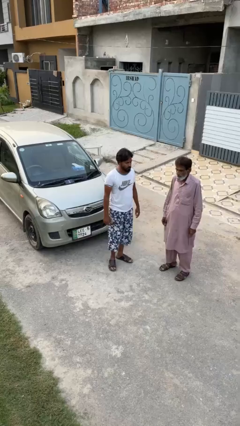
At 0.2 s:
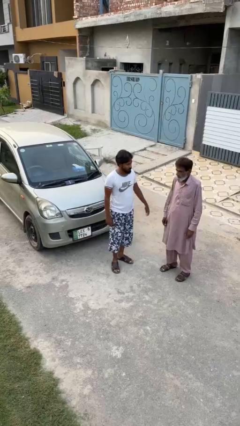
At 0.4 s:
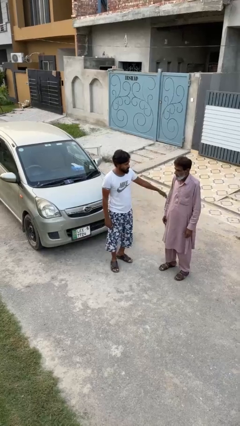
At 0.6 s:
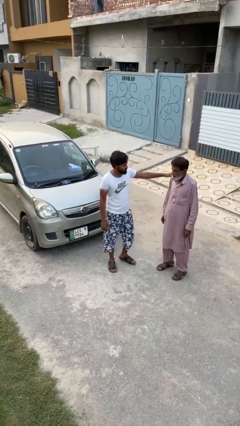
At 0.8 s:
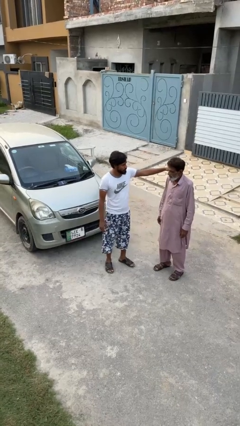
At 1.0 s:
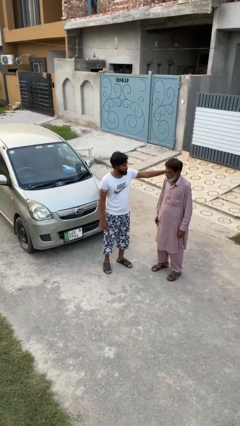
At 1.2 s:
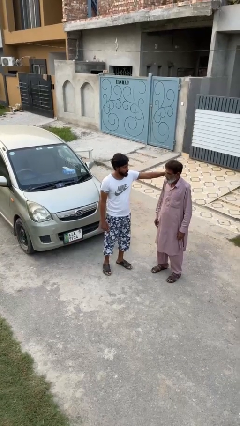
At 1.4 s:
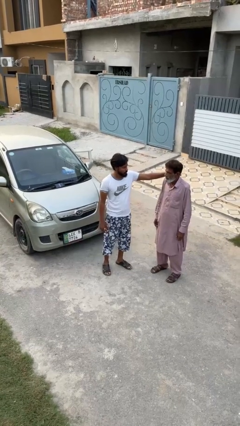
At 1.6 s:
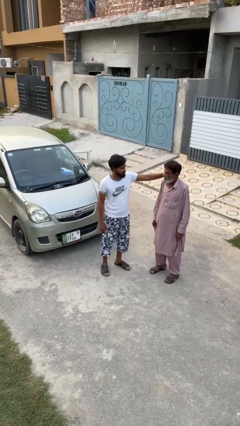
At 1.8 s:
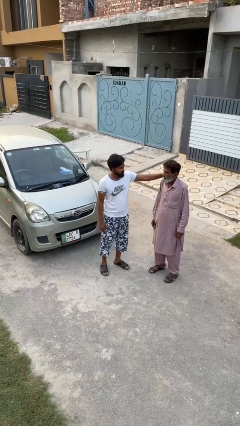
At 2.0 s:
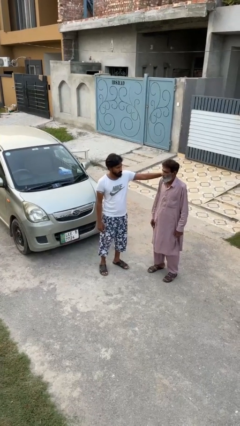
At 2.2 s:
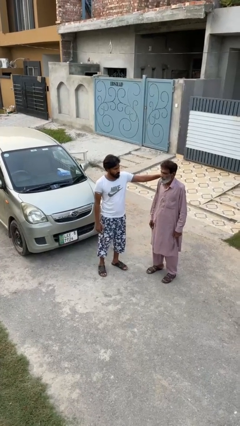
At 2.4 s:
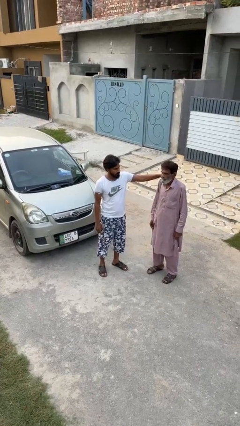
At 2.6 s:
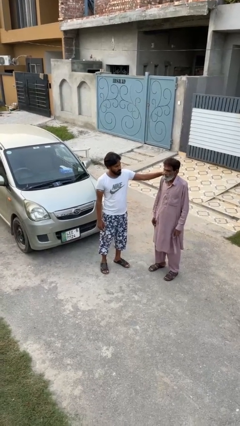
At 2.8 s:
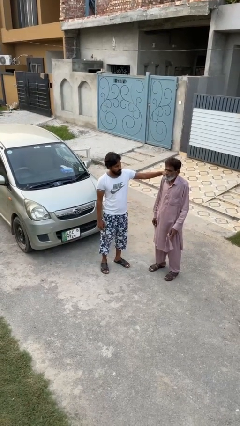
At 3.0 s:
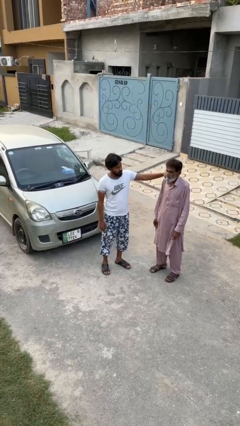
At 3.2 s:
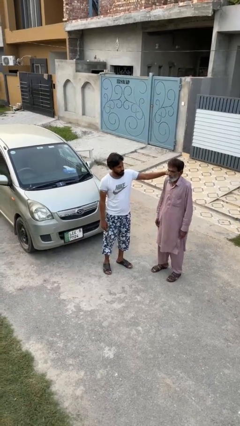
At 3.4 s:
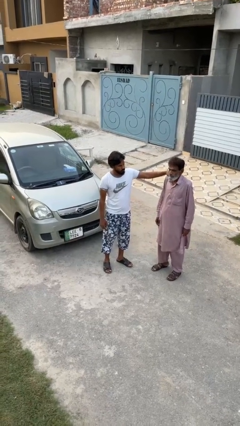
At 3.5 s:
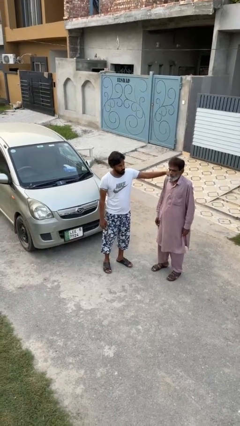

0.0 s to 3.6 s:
person pounds shoulders of person

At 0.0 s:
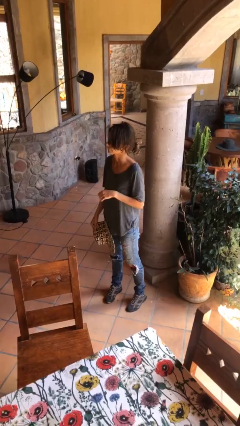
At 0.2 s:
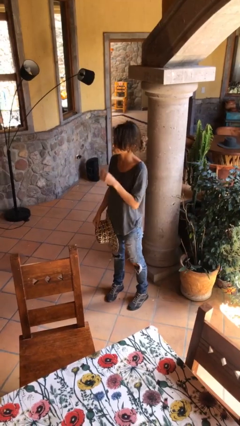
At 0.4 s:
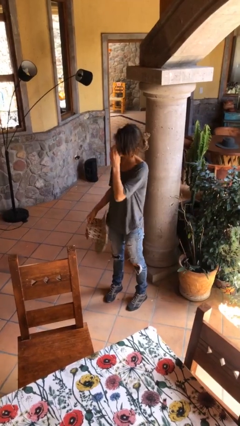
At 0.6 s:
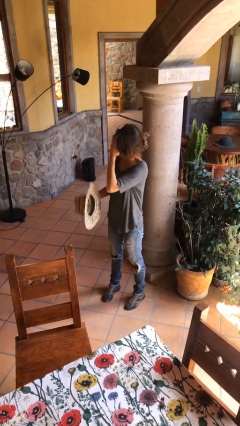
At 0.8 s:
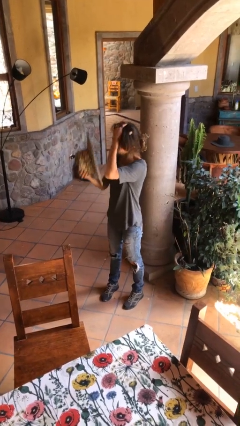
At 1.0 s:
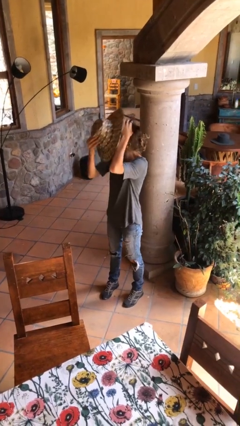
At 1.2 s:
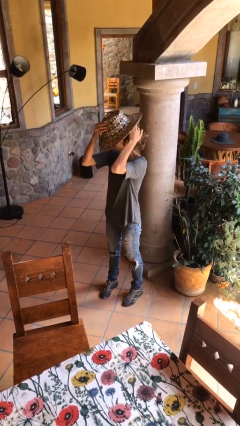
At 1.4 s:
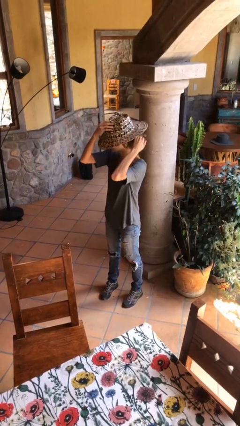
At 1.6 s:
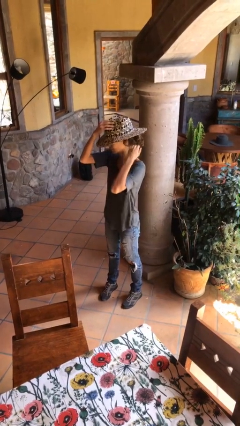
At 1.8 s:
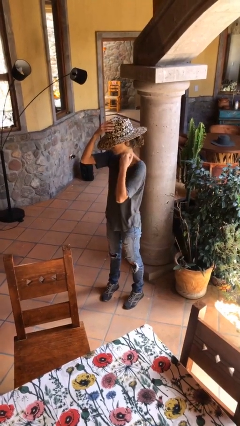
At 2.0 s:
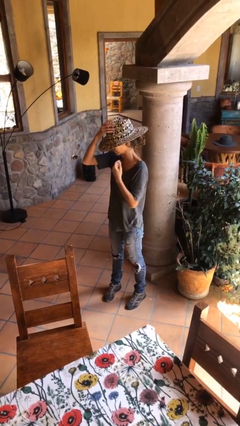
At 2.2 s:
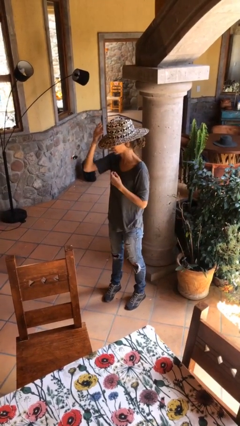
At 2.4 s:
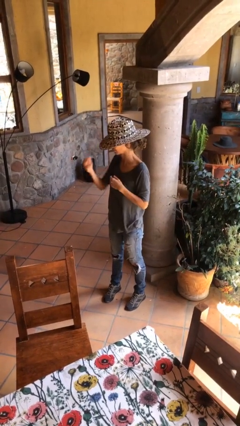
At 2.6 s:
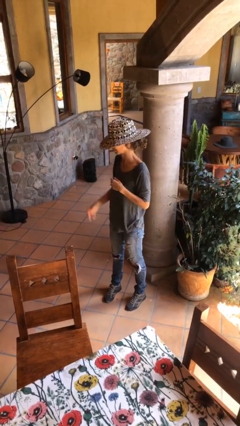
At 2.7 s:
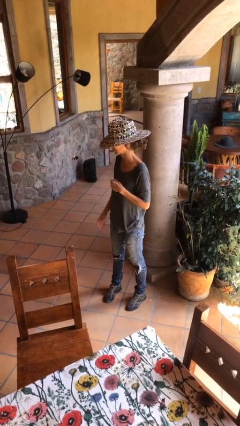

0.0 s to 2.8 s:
person puts on hat

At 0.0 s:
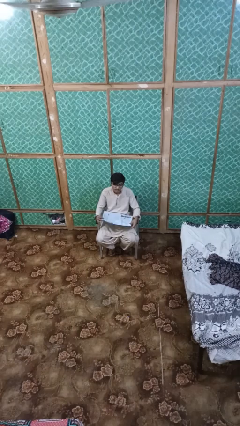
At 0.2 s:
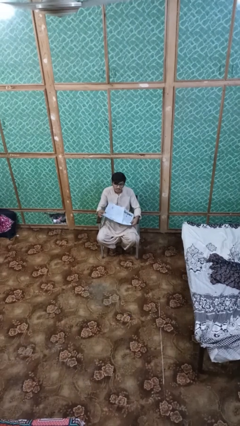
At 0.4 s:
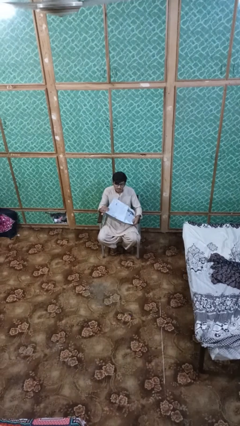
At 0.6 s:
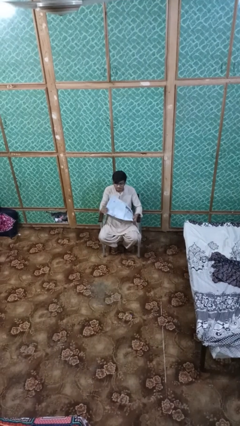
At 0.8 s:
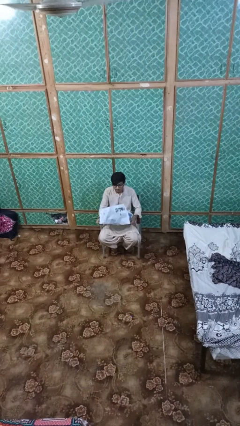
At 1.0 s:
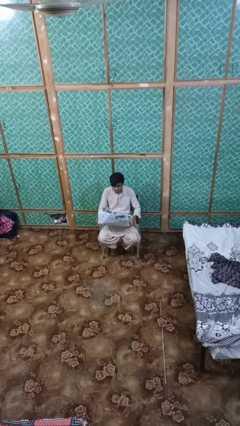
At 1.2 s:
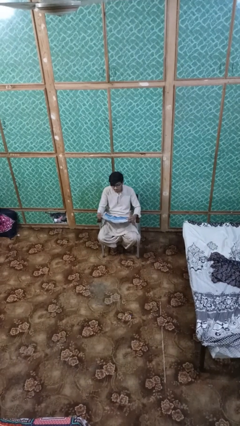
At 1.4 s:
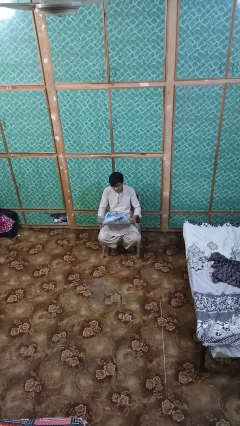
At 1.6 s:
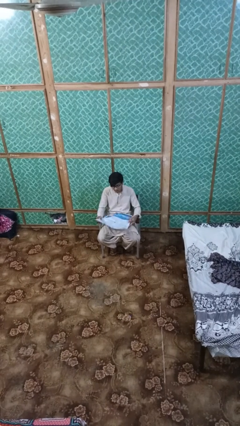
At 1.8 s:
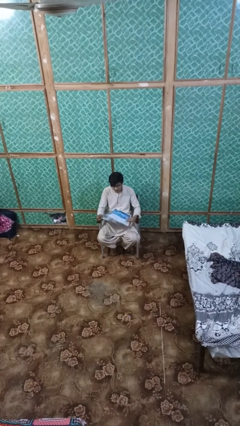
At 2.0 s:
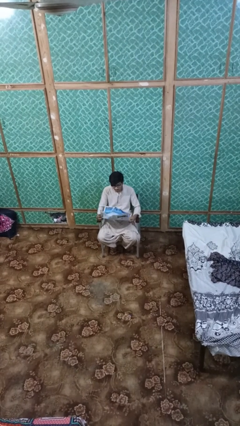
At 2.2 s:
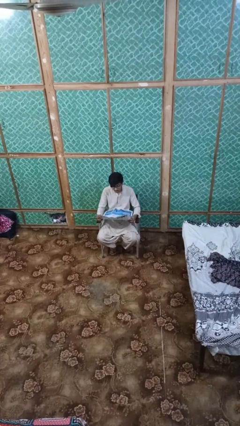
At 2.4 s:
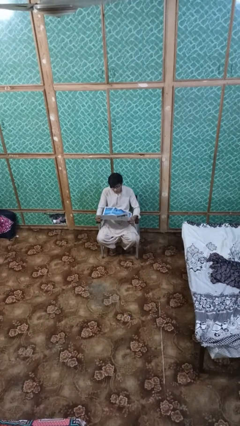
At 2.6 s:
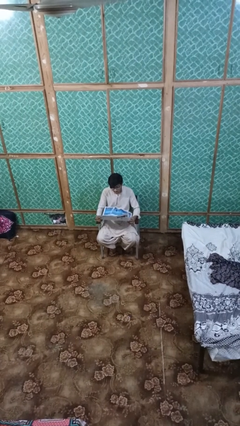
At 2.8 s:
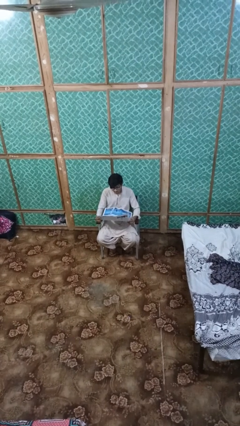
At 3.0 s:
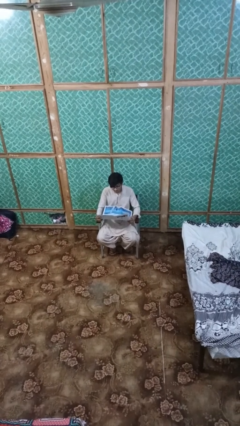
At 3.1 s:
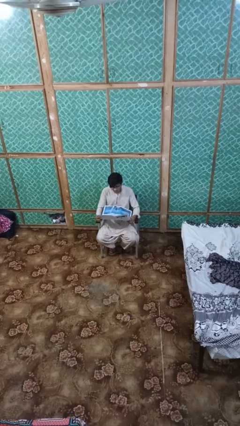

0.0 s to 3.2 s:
person reads newspaper

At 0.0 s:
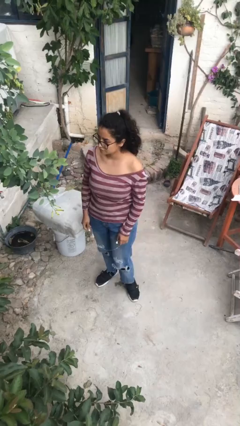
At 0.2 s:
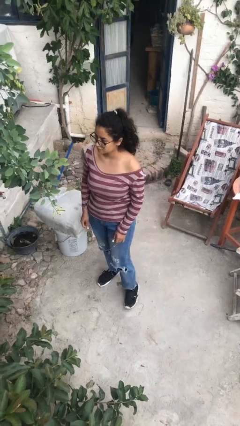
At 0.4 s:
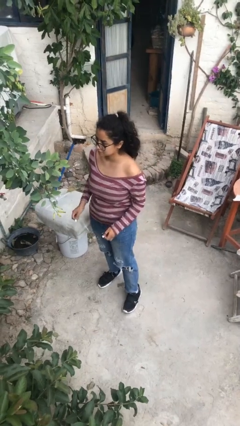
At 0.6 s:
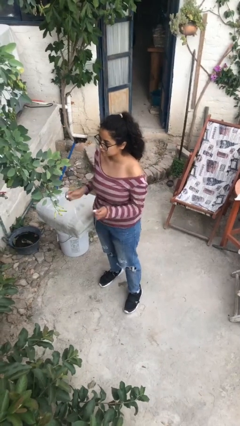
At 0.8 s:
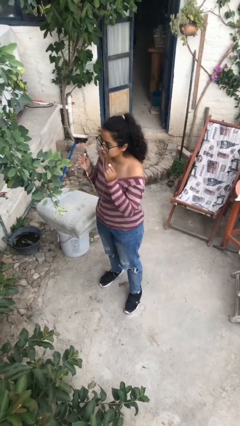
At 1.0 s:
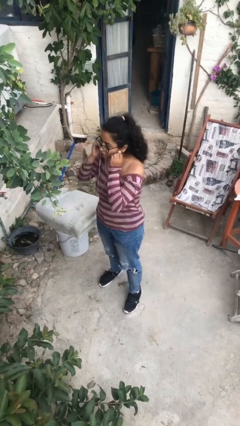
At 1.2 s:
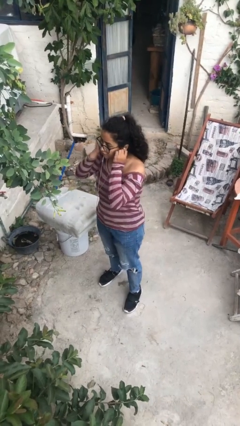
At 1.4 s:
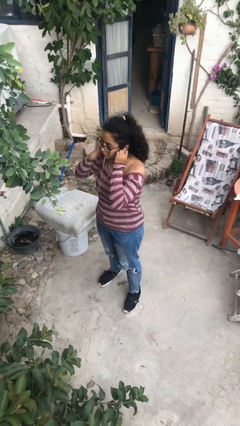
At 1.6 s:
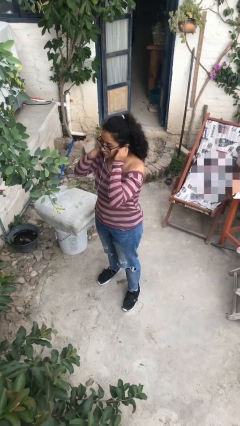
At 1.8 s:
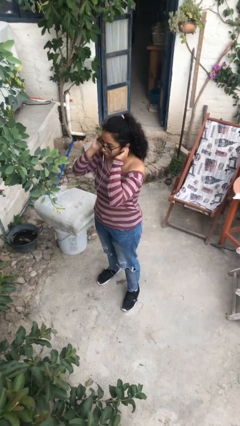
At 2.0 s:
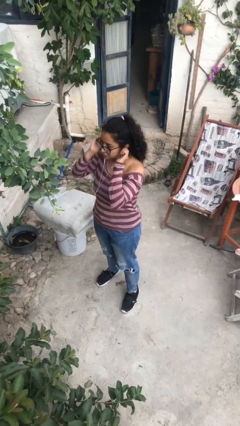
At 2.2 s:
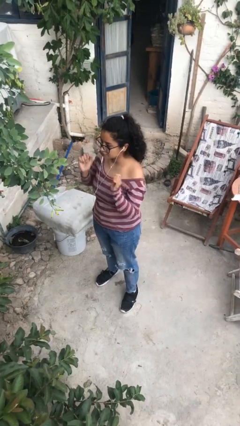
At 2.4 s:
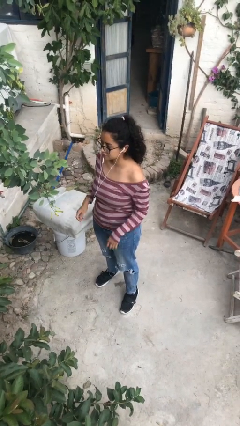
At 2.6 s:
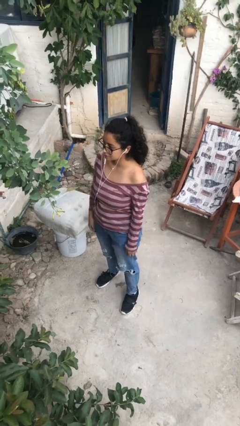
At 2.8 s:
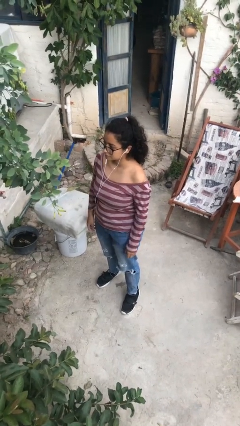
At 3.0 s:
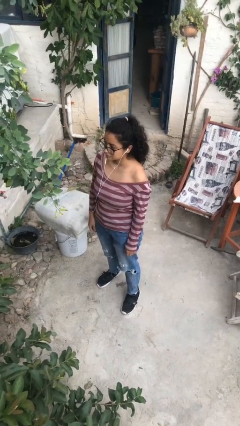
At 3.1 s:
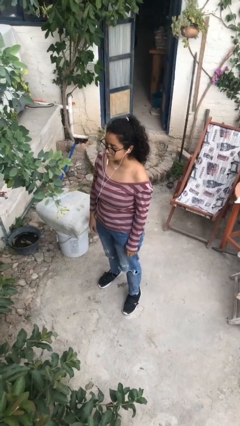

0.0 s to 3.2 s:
person puts on headphones

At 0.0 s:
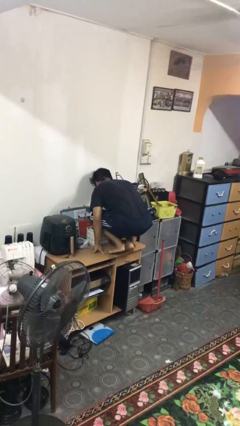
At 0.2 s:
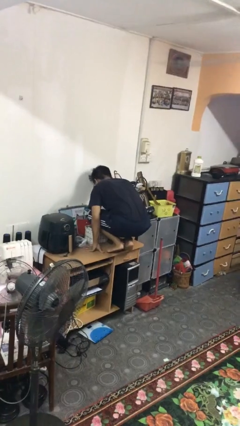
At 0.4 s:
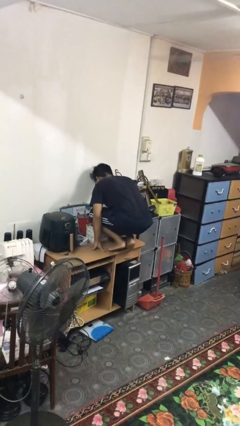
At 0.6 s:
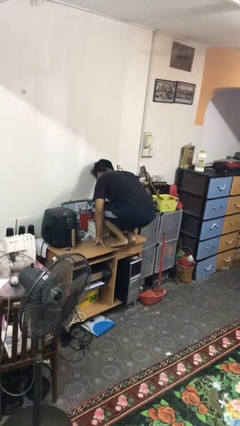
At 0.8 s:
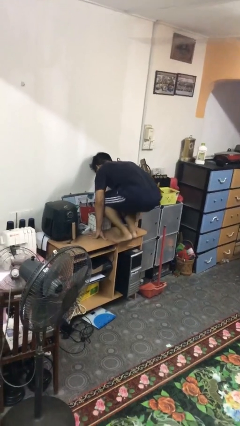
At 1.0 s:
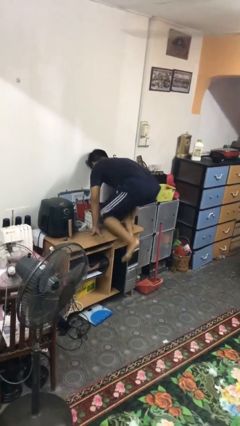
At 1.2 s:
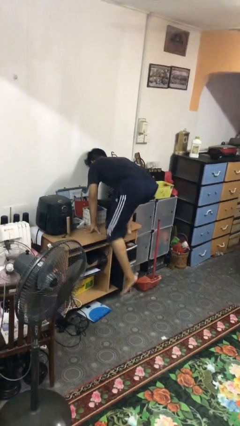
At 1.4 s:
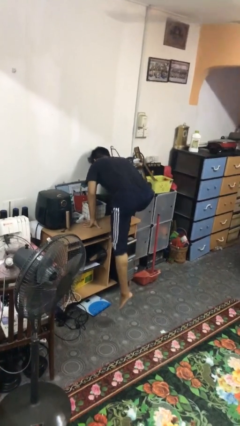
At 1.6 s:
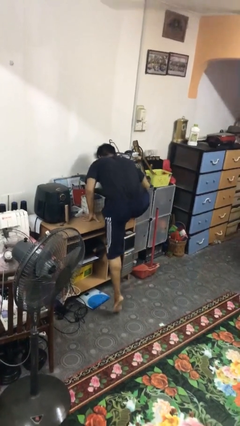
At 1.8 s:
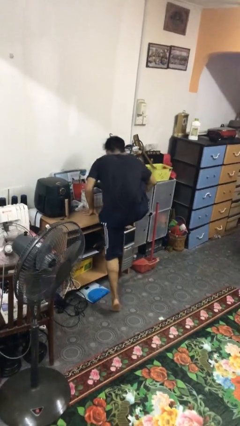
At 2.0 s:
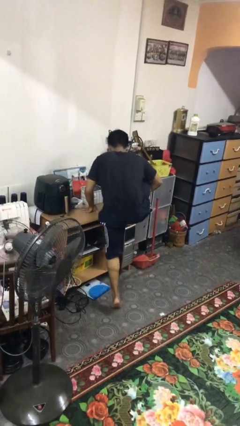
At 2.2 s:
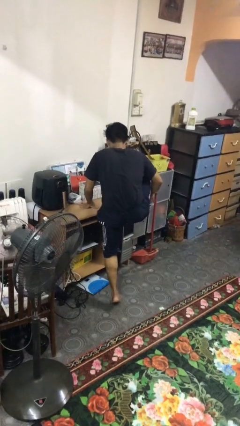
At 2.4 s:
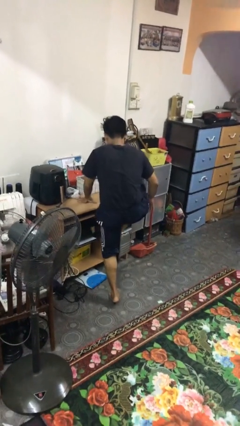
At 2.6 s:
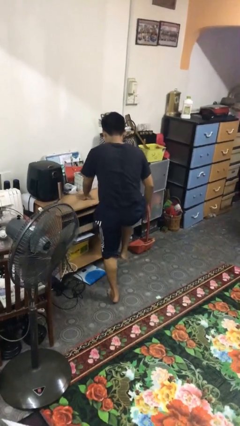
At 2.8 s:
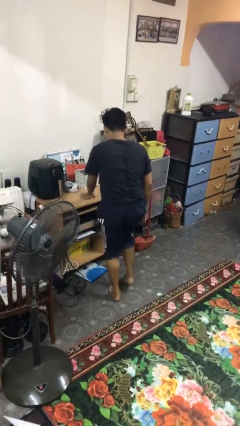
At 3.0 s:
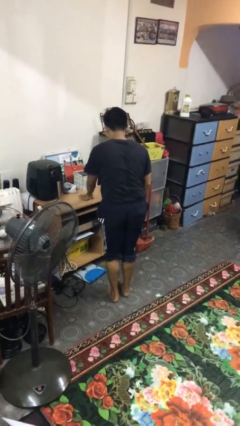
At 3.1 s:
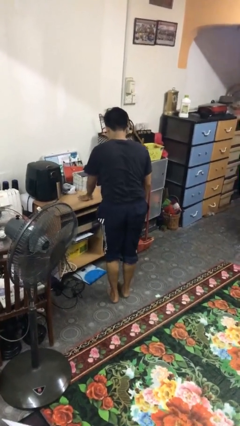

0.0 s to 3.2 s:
person climbs off table

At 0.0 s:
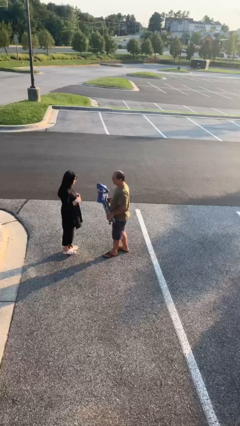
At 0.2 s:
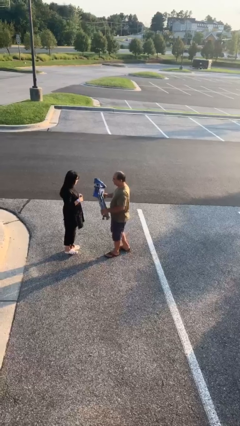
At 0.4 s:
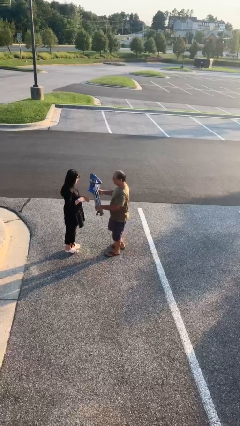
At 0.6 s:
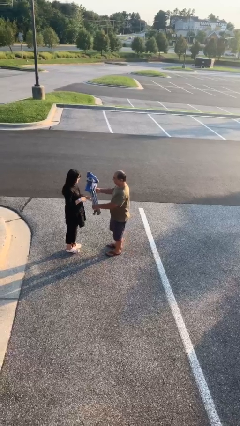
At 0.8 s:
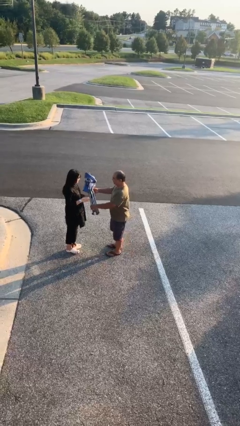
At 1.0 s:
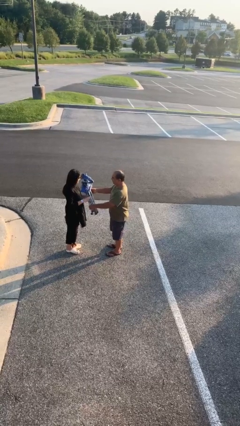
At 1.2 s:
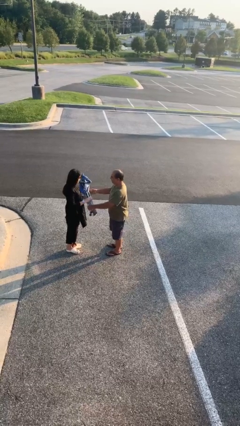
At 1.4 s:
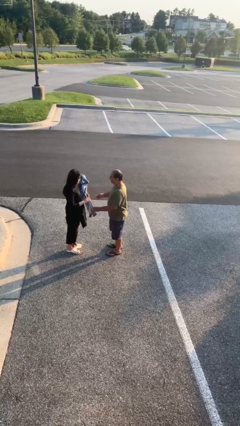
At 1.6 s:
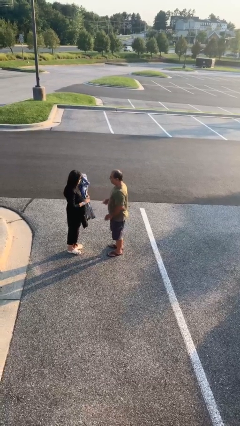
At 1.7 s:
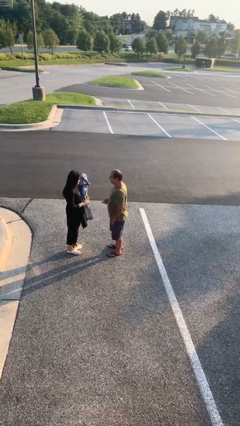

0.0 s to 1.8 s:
person transfers object to person
